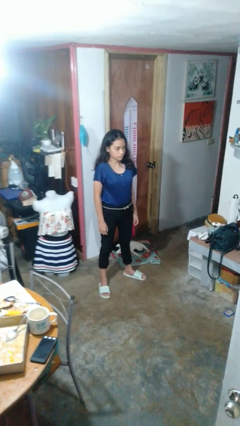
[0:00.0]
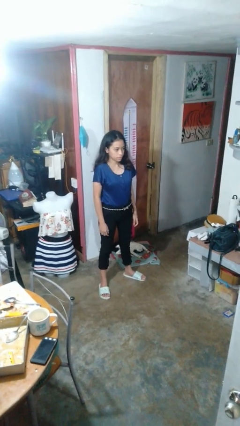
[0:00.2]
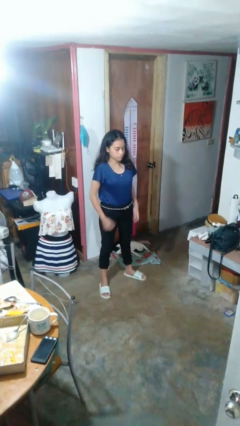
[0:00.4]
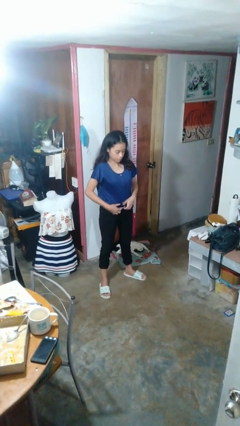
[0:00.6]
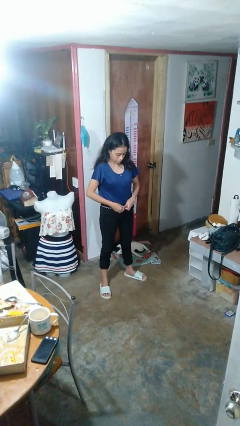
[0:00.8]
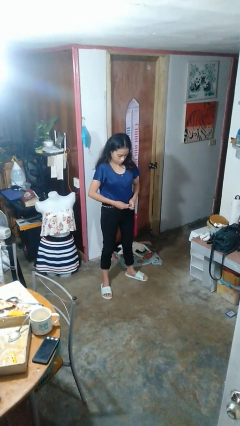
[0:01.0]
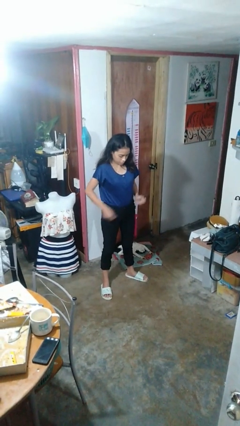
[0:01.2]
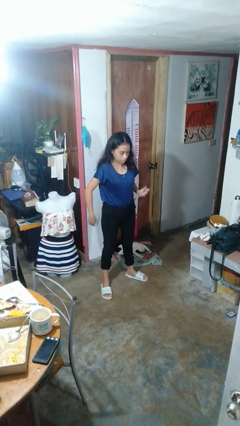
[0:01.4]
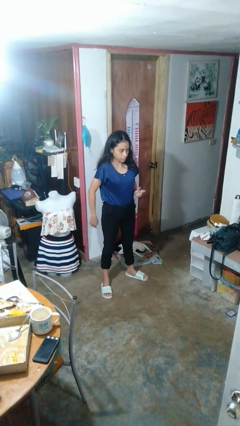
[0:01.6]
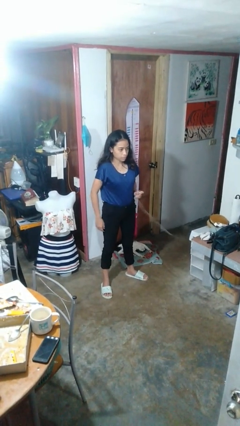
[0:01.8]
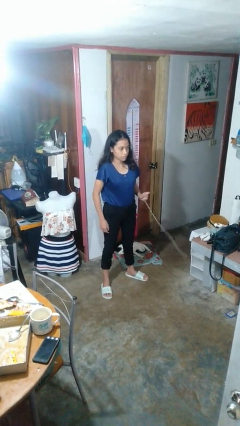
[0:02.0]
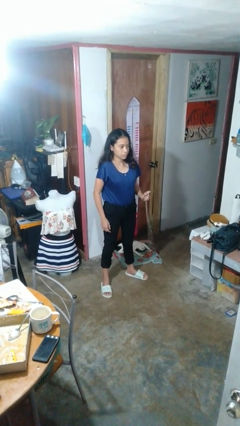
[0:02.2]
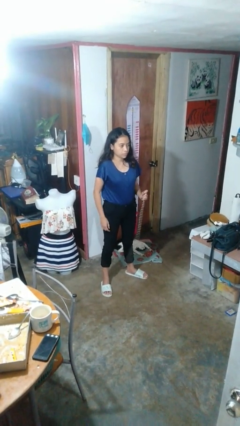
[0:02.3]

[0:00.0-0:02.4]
person takes off belt

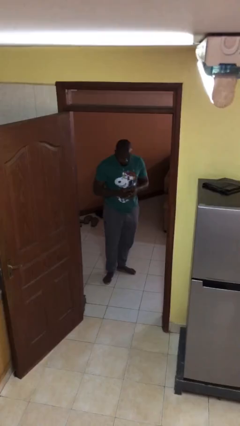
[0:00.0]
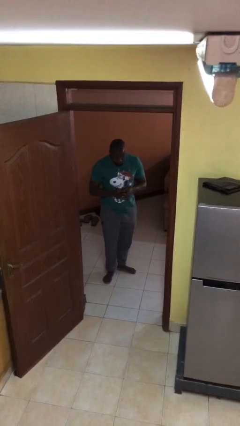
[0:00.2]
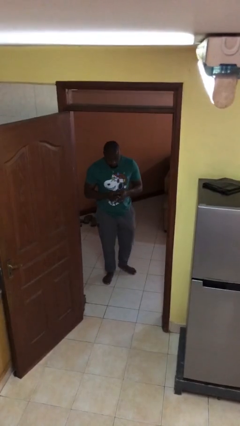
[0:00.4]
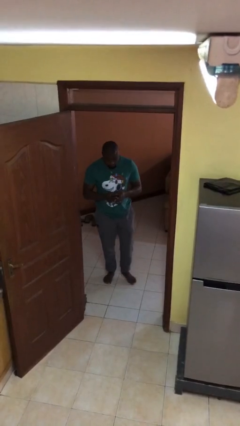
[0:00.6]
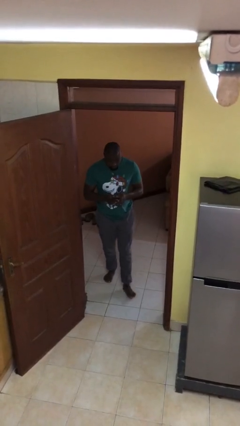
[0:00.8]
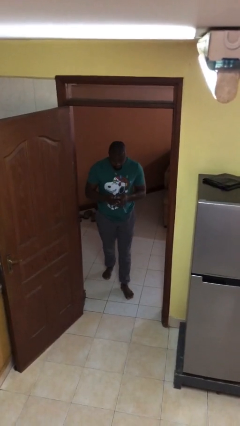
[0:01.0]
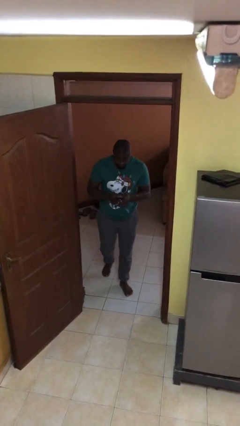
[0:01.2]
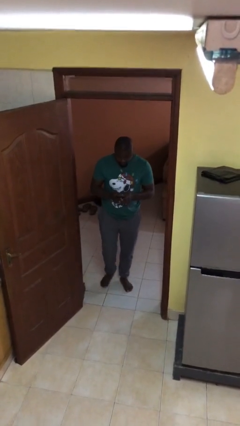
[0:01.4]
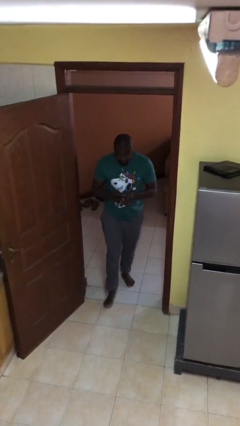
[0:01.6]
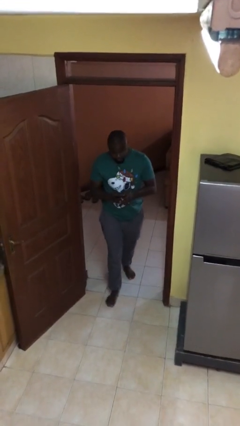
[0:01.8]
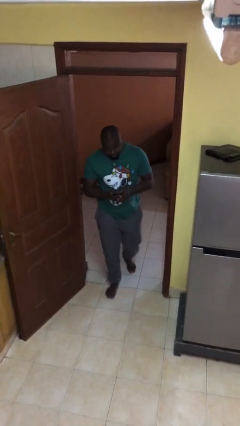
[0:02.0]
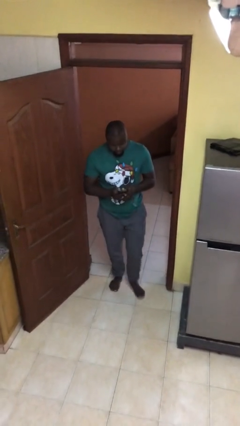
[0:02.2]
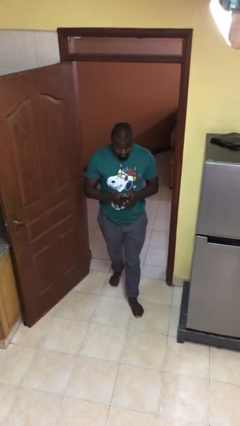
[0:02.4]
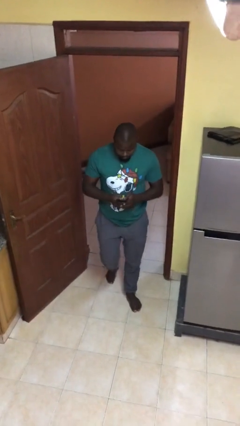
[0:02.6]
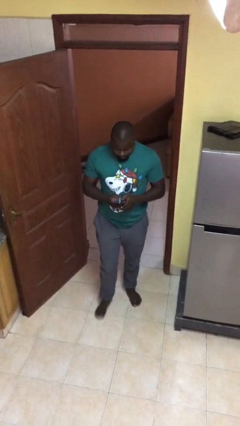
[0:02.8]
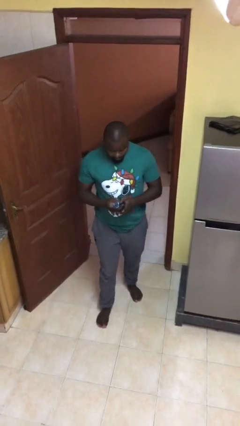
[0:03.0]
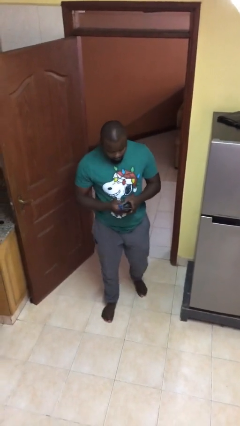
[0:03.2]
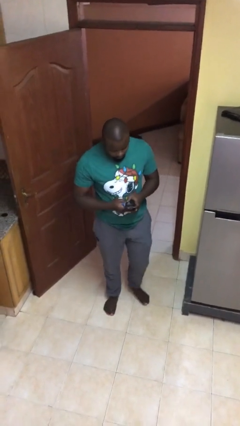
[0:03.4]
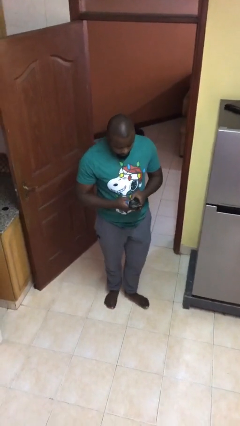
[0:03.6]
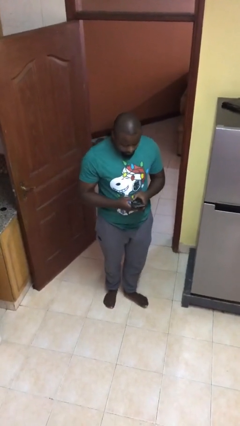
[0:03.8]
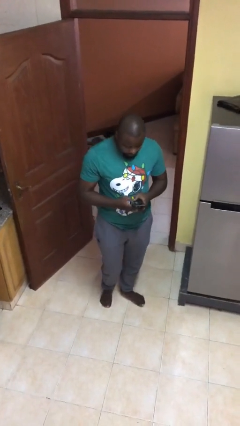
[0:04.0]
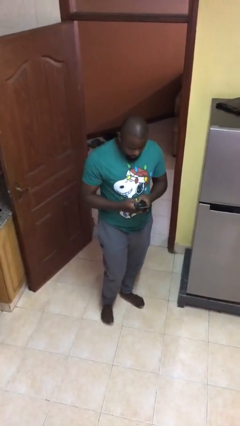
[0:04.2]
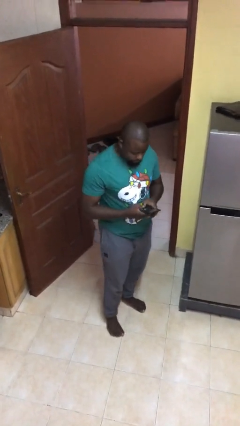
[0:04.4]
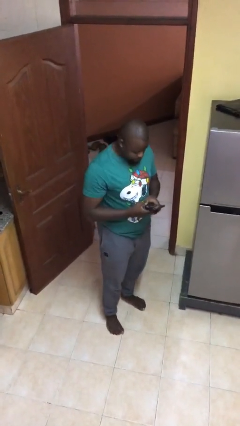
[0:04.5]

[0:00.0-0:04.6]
person enters scene through structure

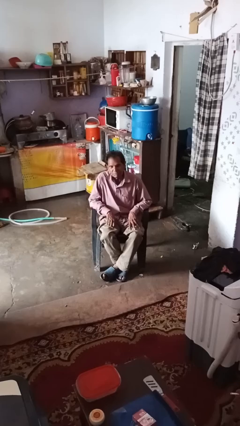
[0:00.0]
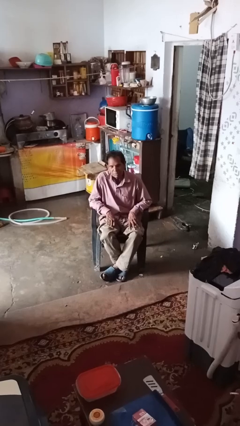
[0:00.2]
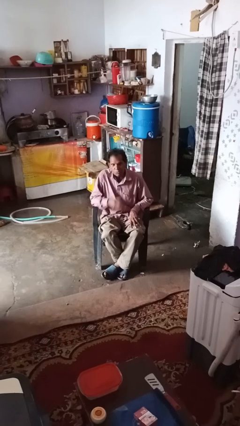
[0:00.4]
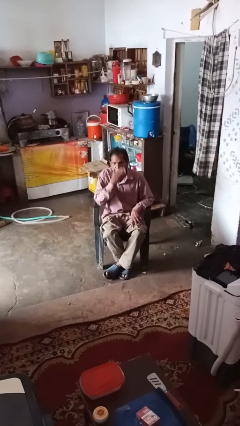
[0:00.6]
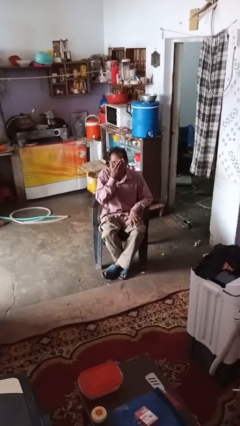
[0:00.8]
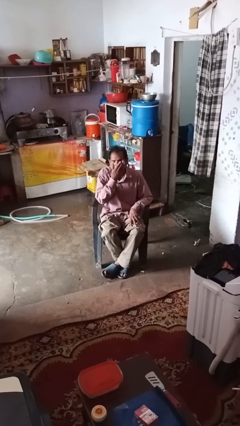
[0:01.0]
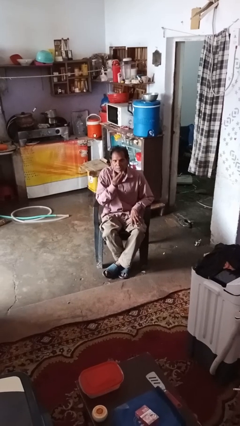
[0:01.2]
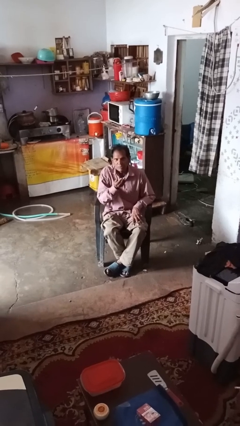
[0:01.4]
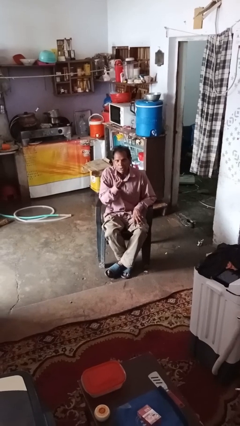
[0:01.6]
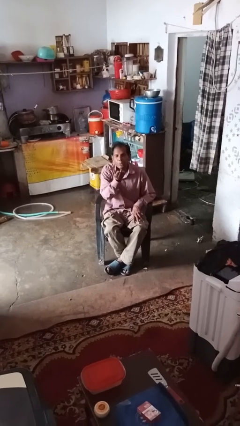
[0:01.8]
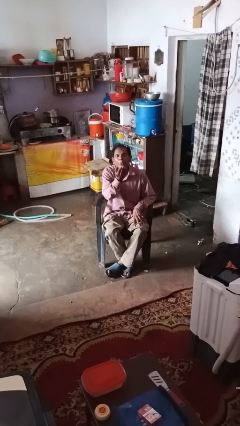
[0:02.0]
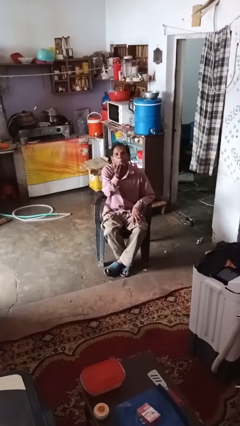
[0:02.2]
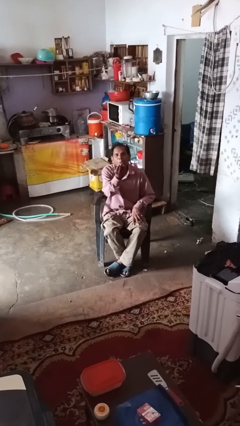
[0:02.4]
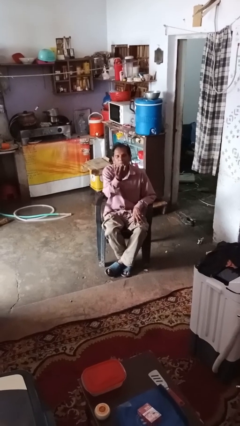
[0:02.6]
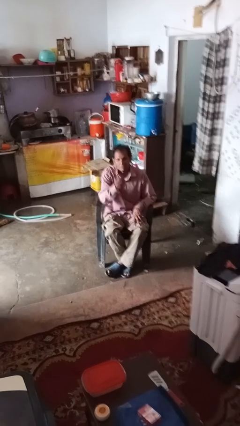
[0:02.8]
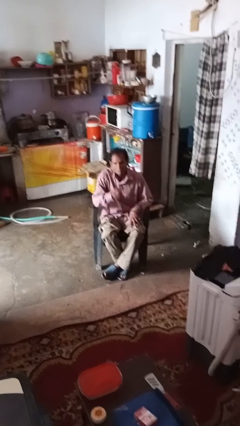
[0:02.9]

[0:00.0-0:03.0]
person gestures blow kiss

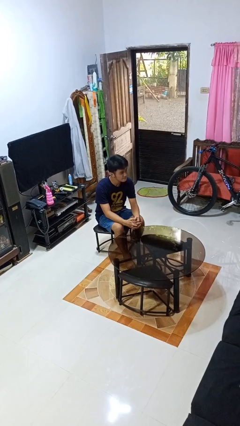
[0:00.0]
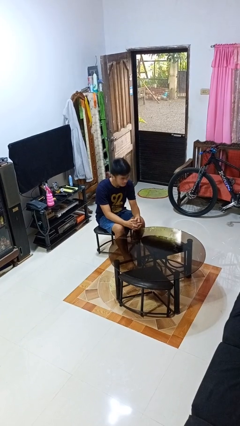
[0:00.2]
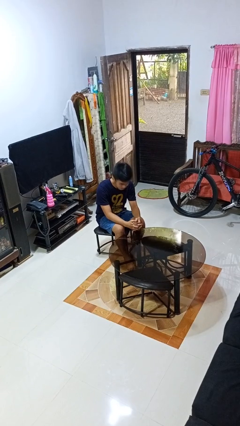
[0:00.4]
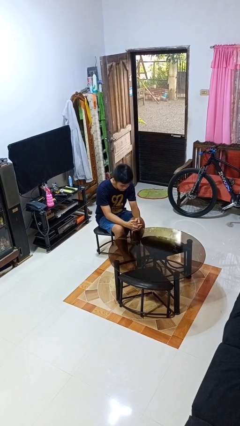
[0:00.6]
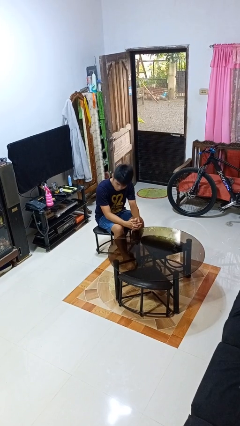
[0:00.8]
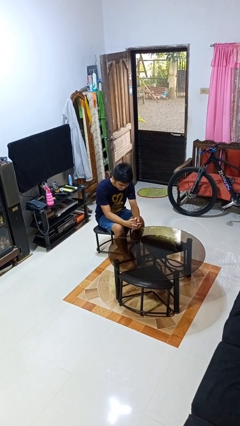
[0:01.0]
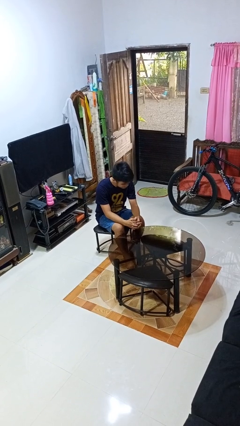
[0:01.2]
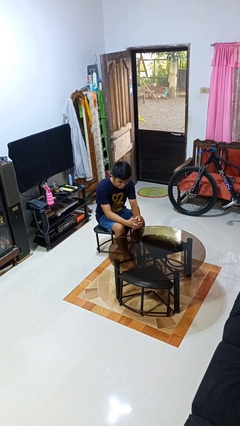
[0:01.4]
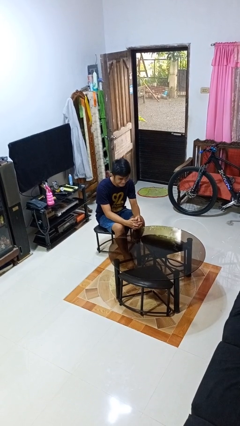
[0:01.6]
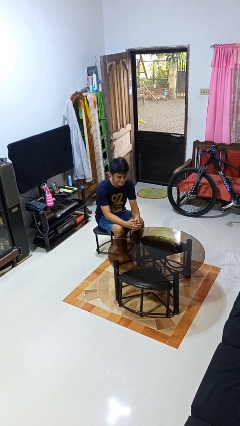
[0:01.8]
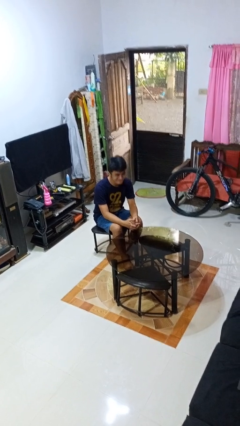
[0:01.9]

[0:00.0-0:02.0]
person shakes head

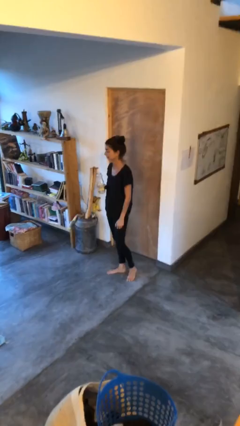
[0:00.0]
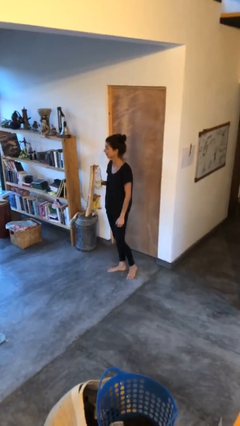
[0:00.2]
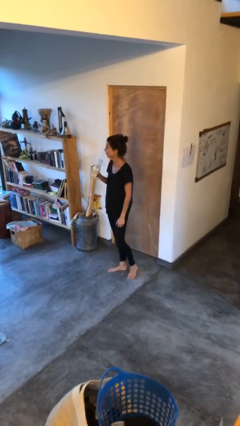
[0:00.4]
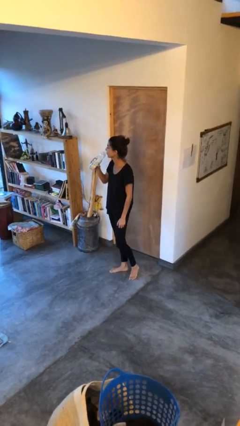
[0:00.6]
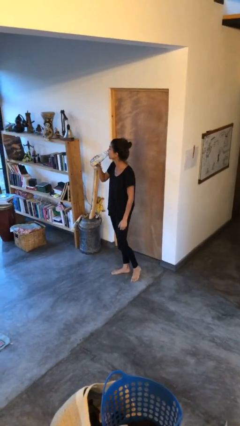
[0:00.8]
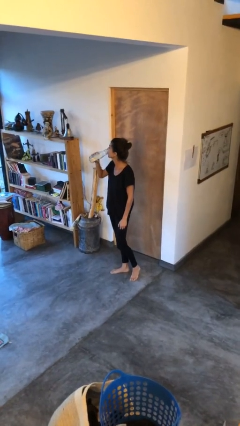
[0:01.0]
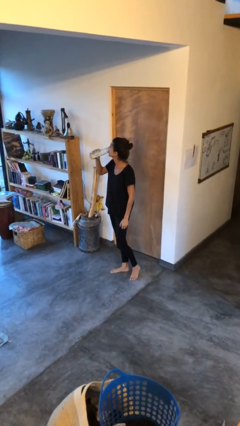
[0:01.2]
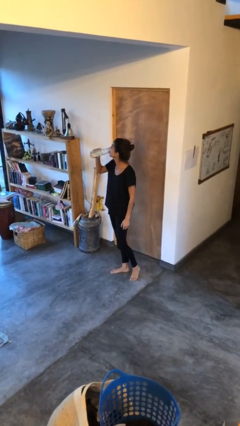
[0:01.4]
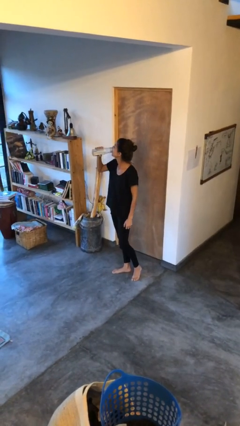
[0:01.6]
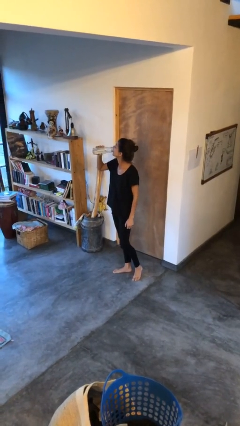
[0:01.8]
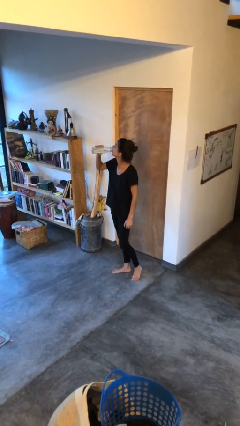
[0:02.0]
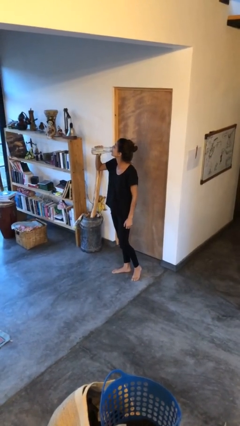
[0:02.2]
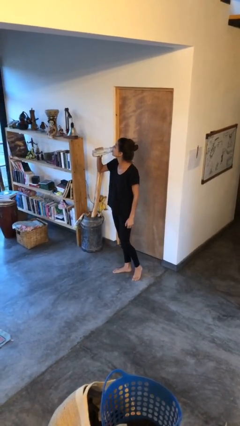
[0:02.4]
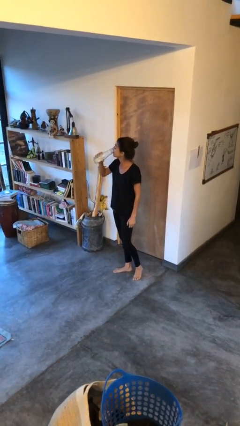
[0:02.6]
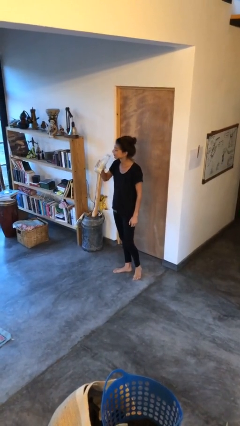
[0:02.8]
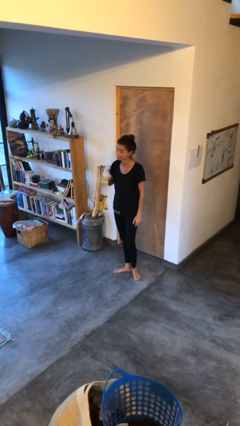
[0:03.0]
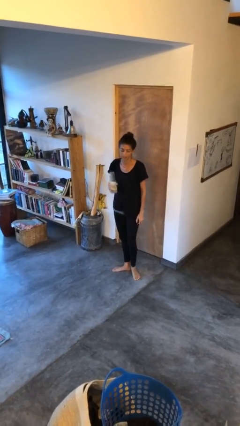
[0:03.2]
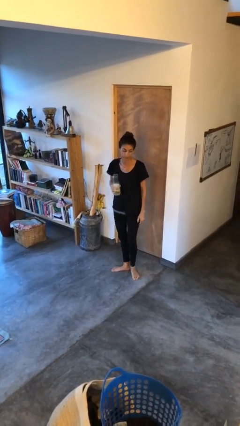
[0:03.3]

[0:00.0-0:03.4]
person drinks from bottle

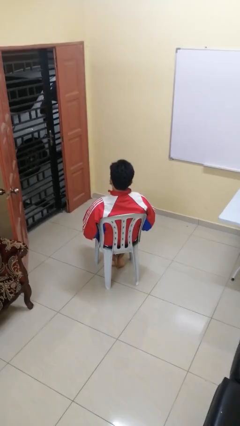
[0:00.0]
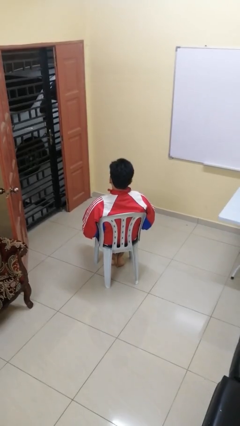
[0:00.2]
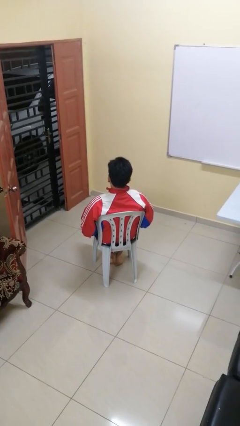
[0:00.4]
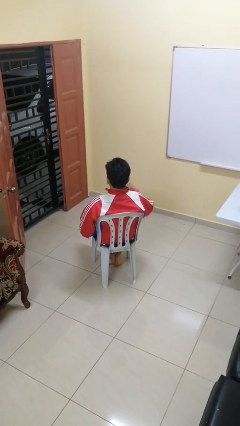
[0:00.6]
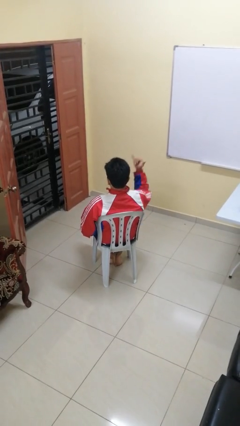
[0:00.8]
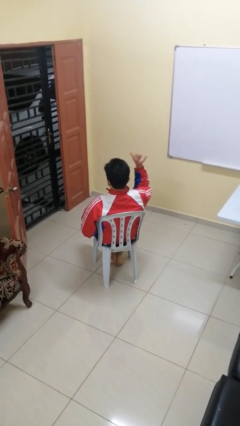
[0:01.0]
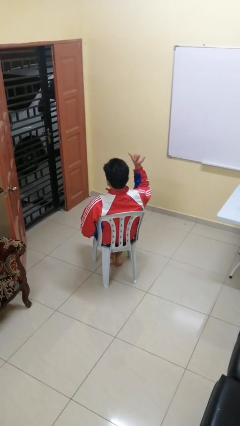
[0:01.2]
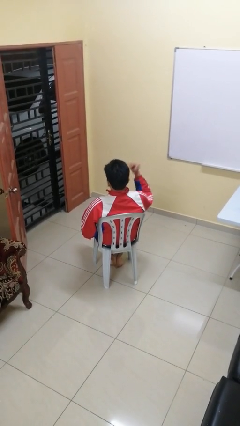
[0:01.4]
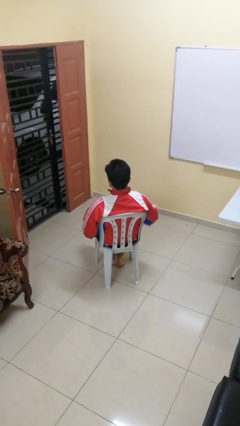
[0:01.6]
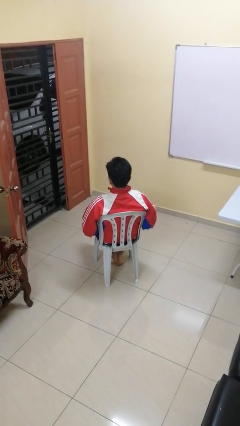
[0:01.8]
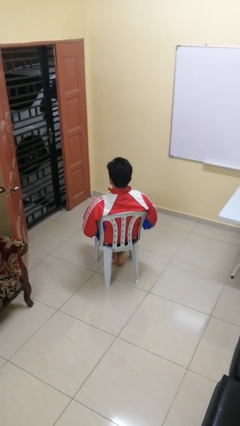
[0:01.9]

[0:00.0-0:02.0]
person gestures hang loose
